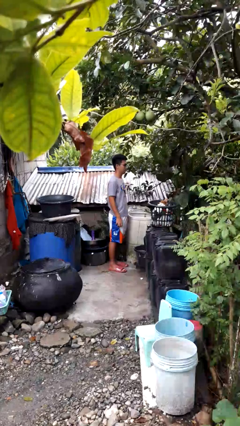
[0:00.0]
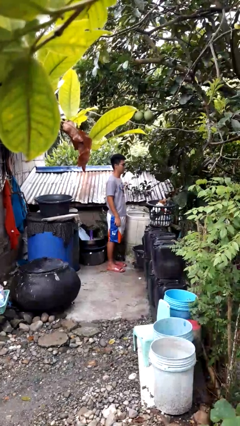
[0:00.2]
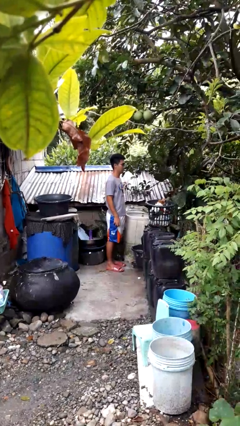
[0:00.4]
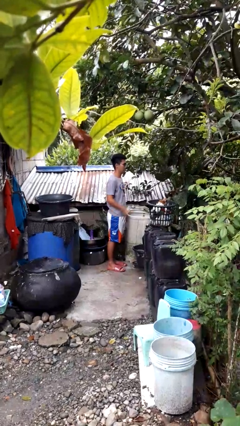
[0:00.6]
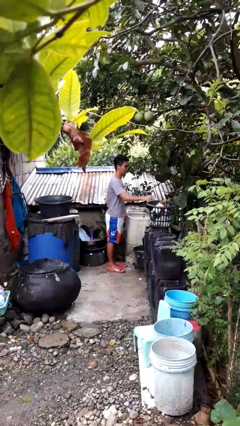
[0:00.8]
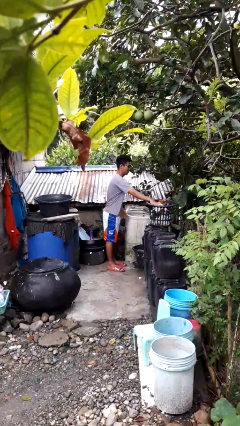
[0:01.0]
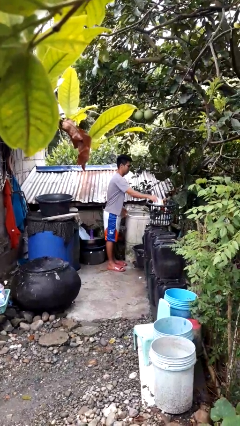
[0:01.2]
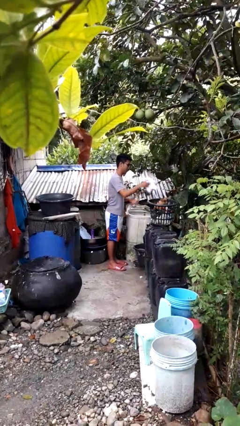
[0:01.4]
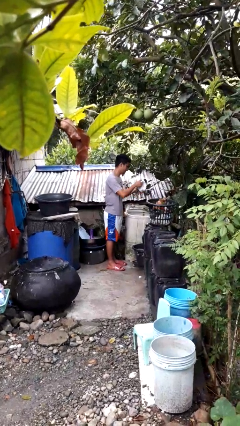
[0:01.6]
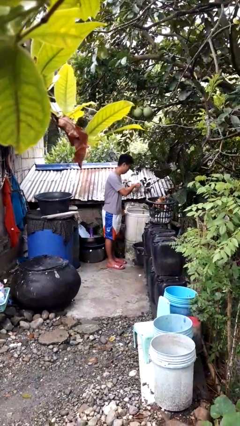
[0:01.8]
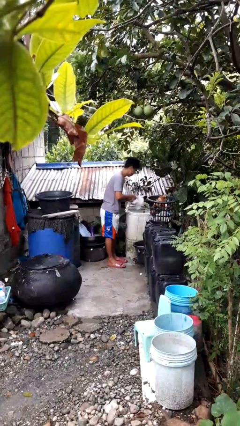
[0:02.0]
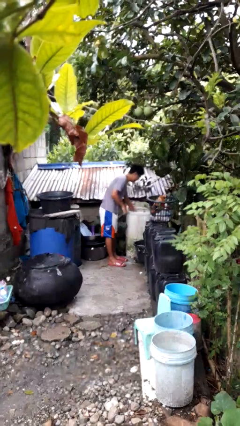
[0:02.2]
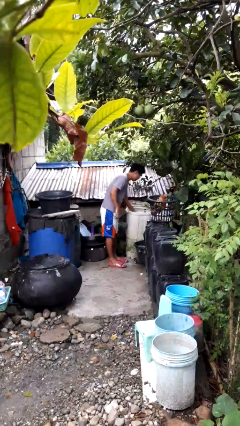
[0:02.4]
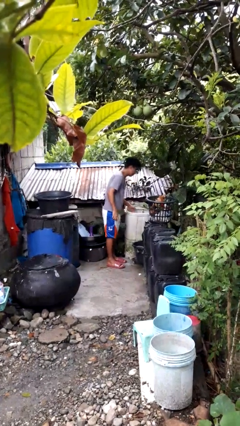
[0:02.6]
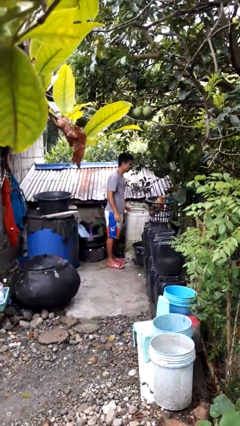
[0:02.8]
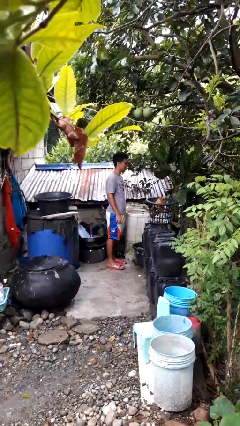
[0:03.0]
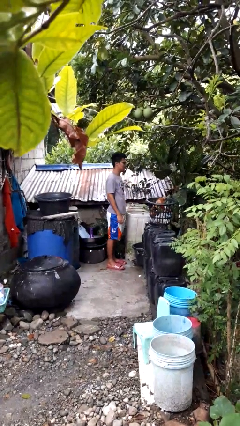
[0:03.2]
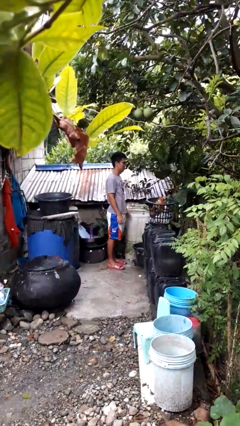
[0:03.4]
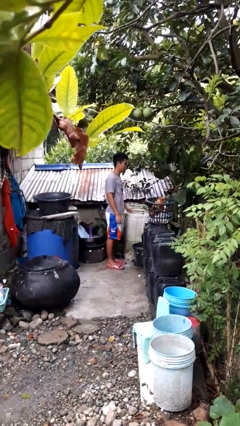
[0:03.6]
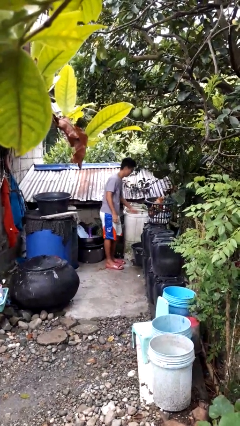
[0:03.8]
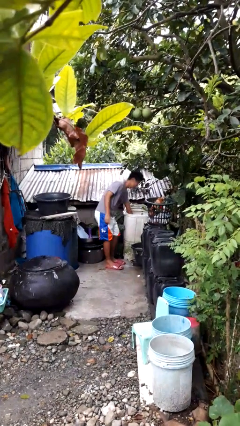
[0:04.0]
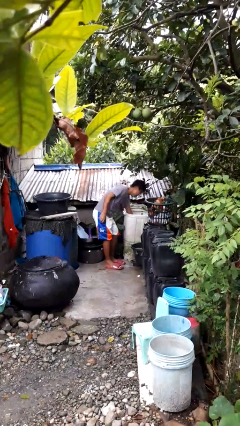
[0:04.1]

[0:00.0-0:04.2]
person loads clotheswasher

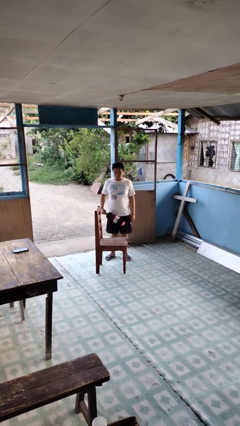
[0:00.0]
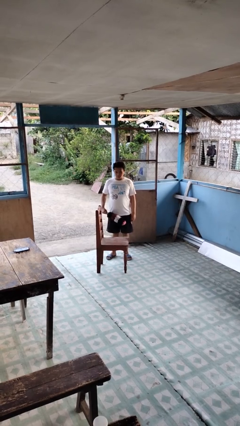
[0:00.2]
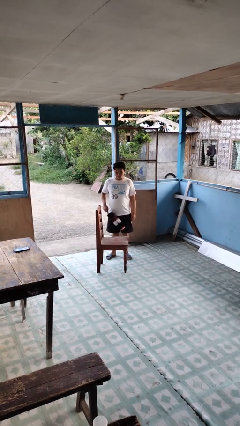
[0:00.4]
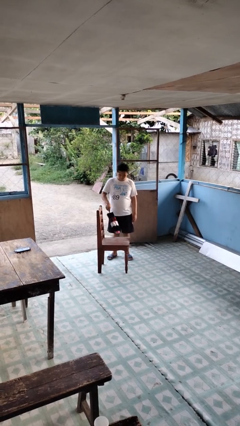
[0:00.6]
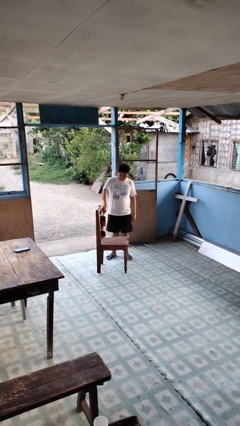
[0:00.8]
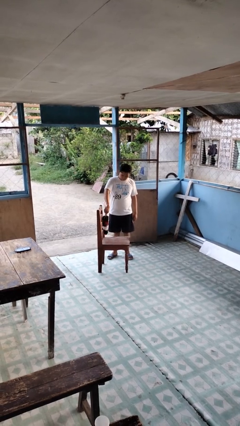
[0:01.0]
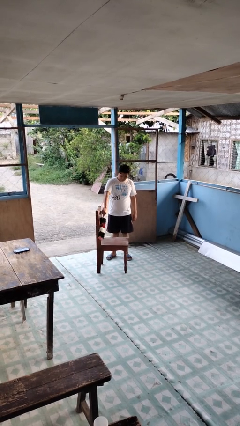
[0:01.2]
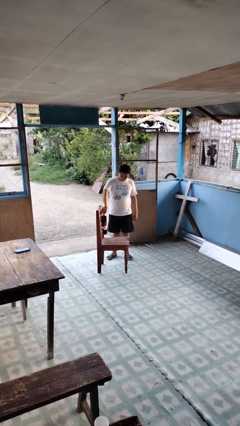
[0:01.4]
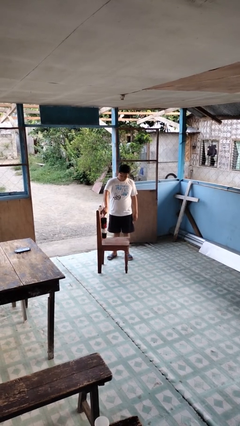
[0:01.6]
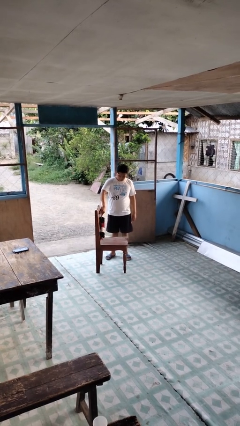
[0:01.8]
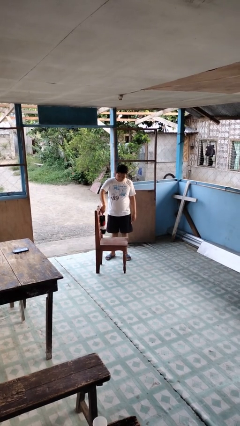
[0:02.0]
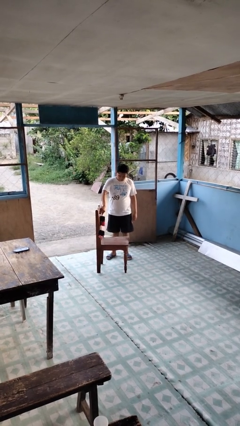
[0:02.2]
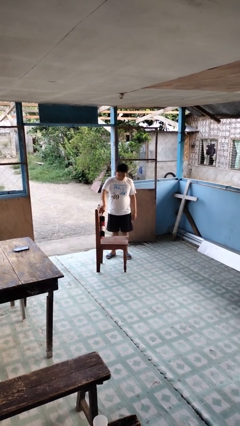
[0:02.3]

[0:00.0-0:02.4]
person dusts furniture

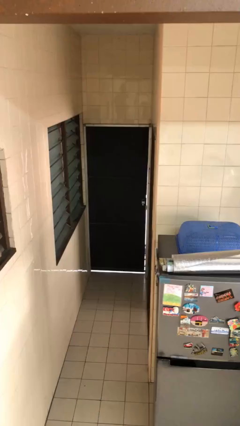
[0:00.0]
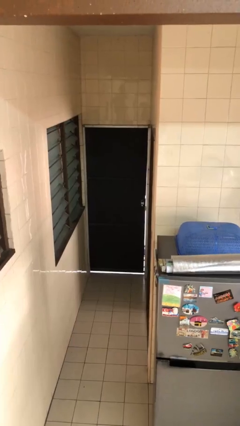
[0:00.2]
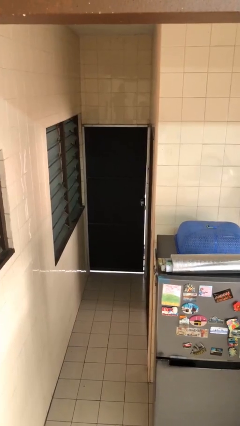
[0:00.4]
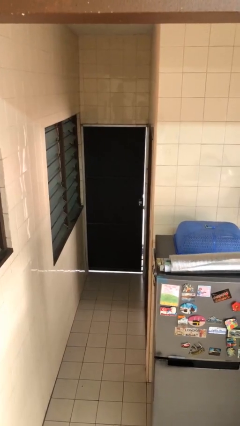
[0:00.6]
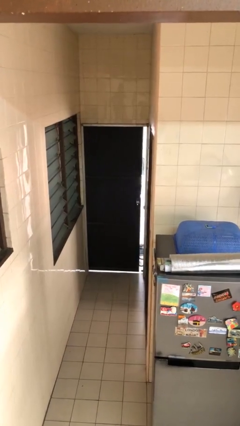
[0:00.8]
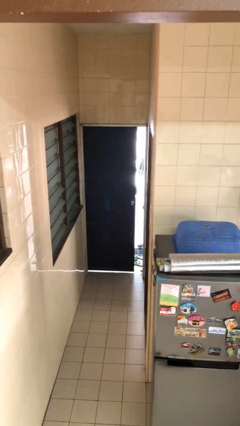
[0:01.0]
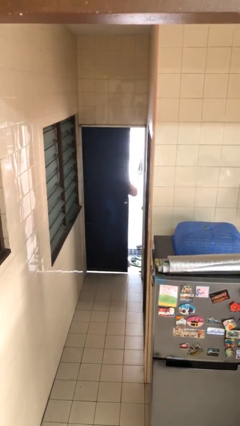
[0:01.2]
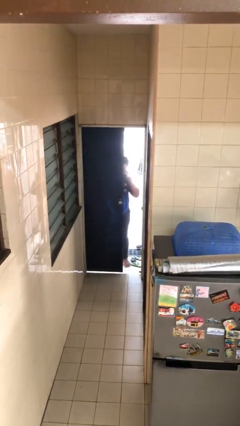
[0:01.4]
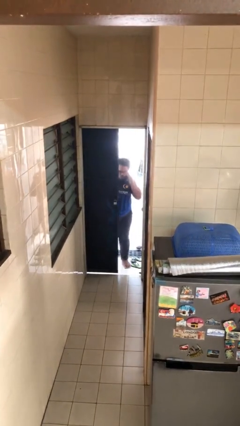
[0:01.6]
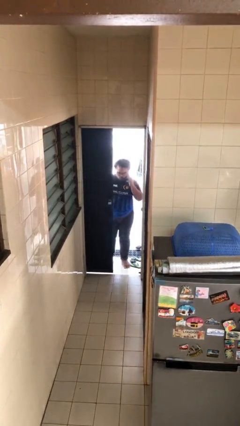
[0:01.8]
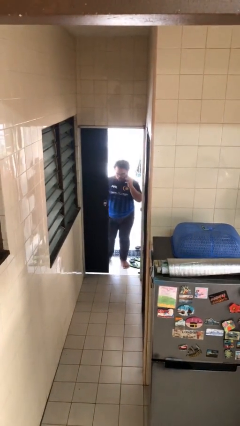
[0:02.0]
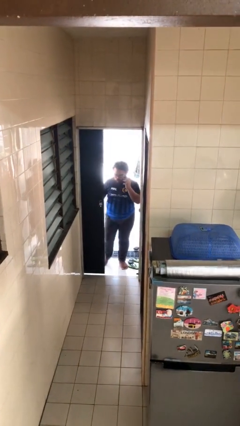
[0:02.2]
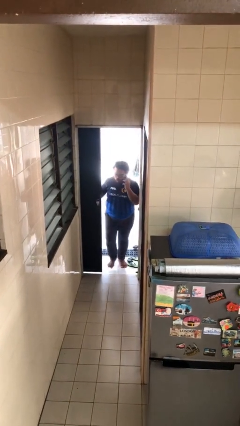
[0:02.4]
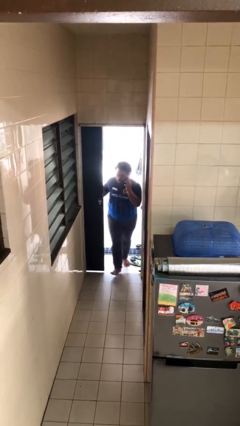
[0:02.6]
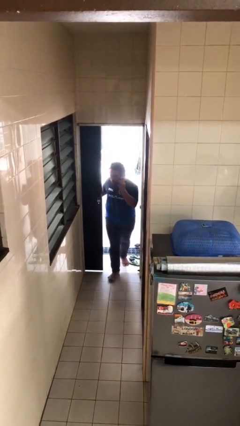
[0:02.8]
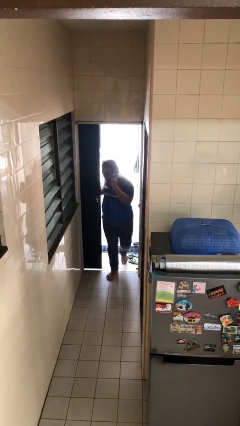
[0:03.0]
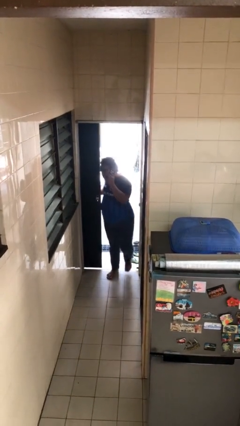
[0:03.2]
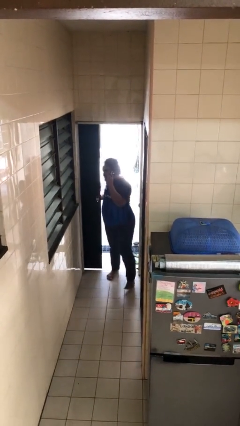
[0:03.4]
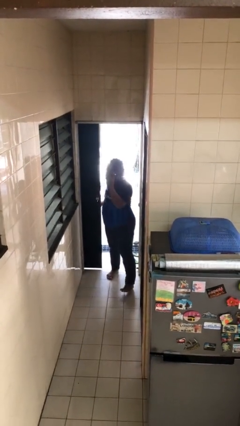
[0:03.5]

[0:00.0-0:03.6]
person opens facility door

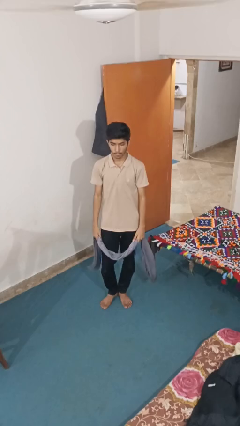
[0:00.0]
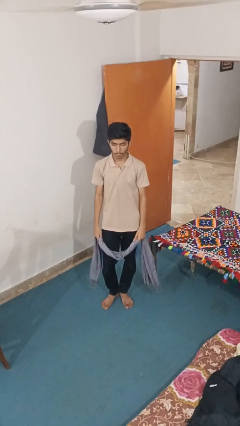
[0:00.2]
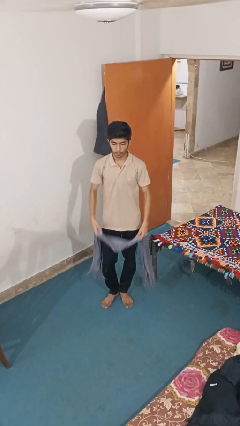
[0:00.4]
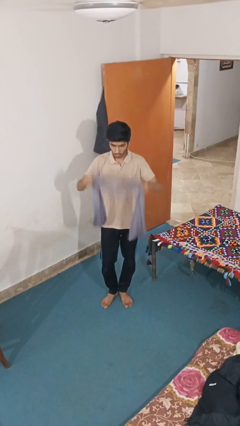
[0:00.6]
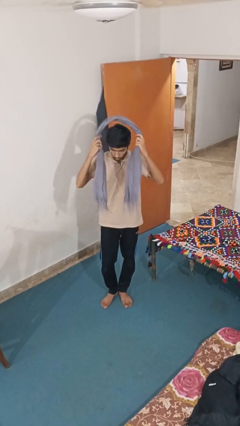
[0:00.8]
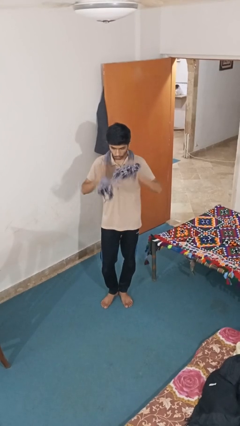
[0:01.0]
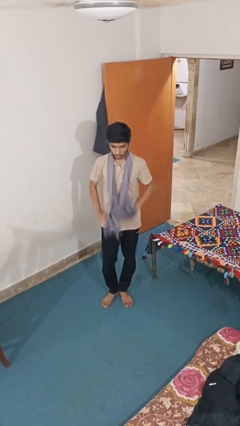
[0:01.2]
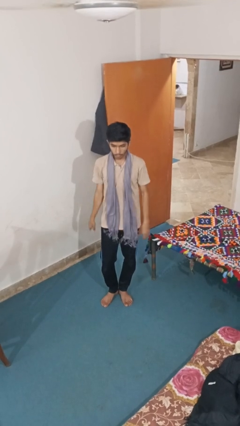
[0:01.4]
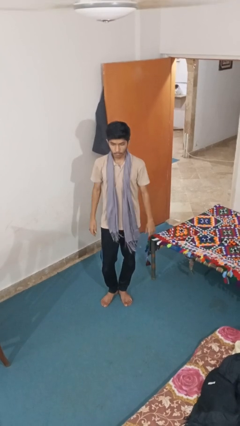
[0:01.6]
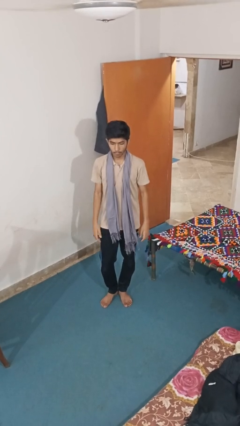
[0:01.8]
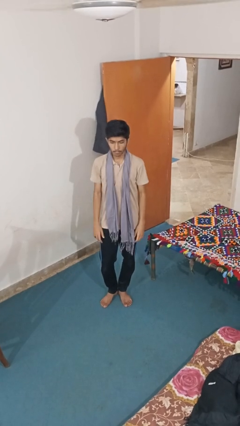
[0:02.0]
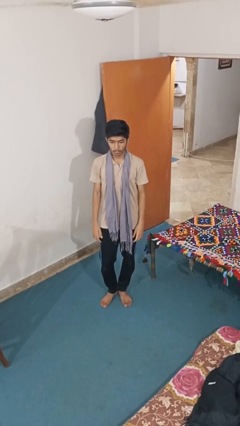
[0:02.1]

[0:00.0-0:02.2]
person puts on scarf

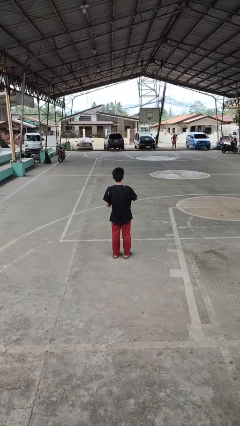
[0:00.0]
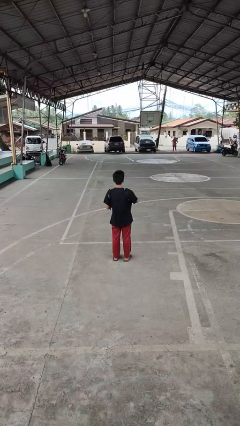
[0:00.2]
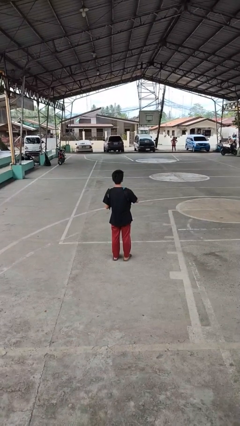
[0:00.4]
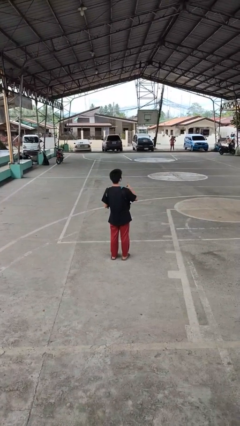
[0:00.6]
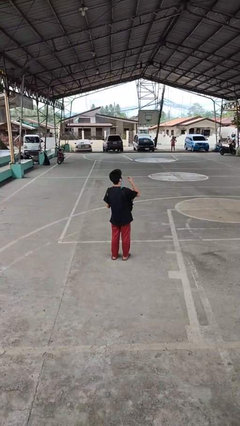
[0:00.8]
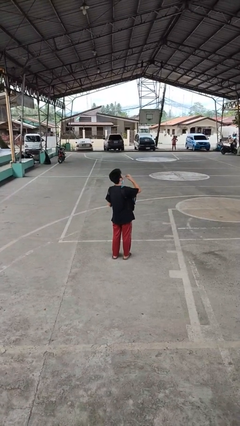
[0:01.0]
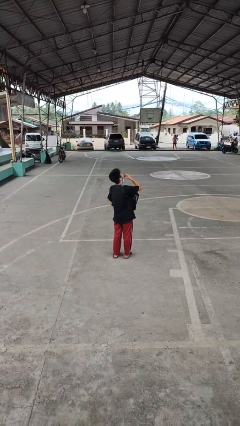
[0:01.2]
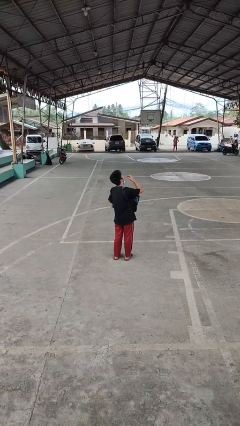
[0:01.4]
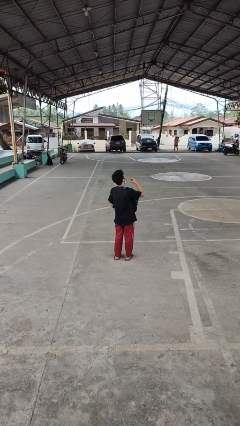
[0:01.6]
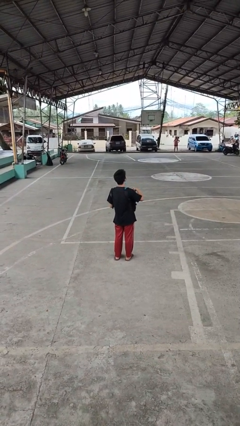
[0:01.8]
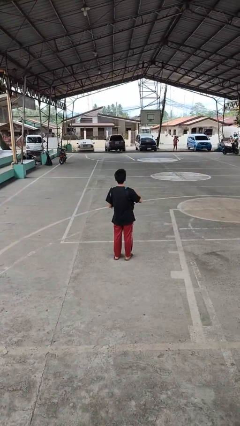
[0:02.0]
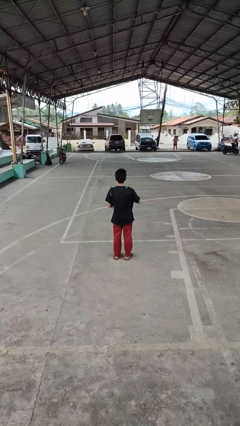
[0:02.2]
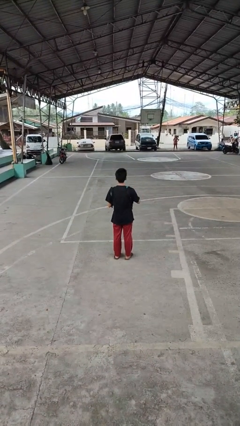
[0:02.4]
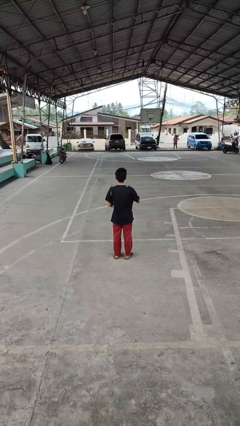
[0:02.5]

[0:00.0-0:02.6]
person eats snack from bag

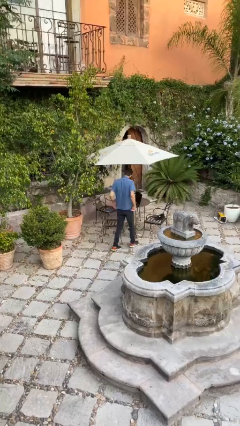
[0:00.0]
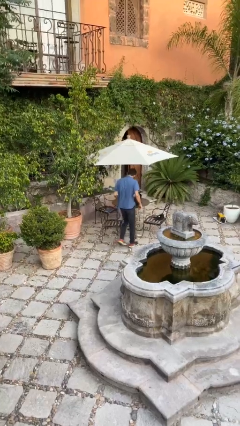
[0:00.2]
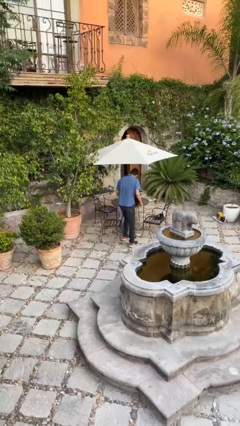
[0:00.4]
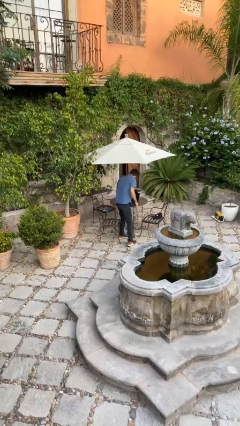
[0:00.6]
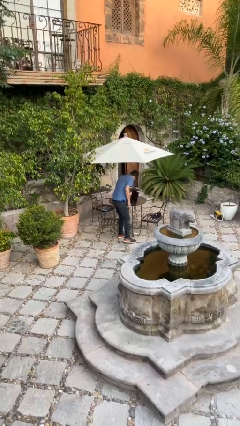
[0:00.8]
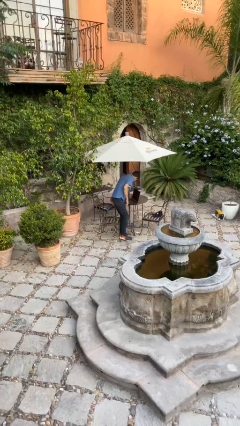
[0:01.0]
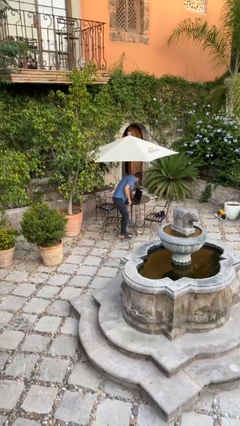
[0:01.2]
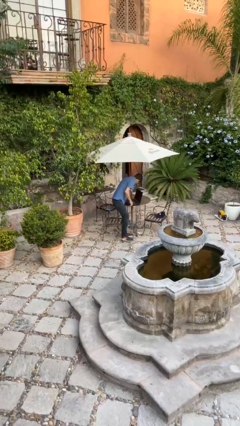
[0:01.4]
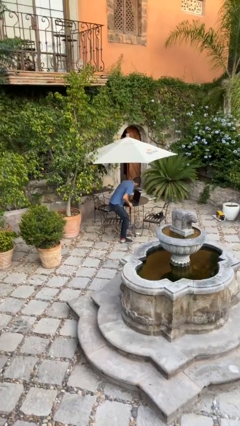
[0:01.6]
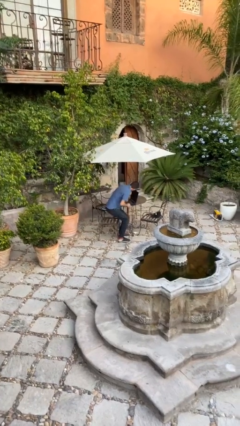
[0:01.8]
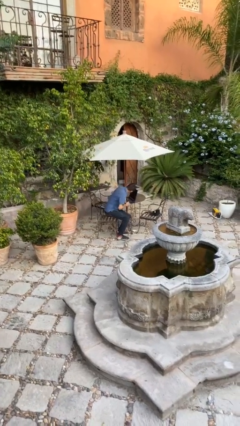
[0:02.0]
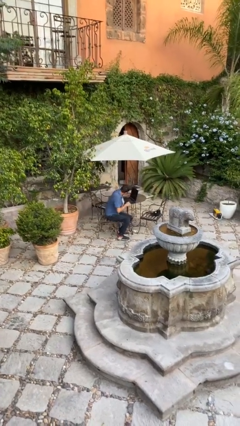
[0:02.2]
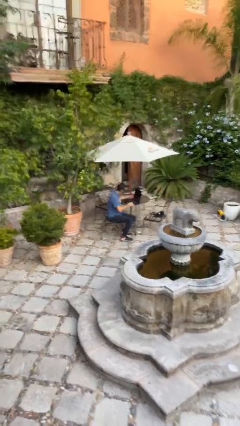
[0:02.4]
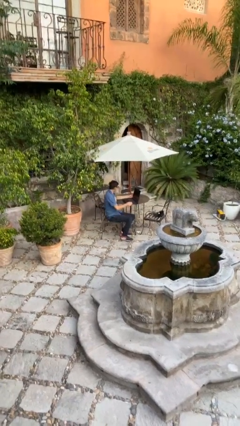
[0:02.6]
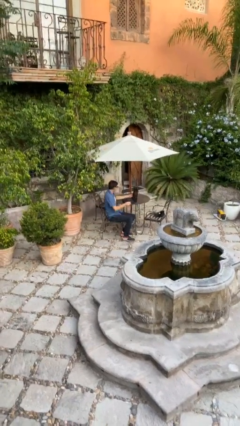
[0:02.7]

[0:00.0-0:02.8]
person sits down
